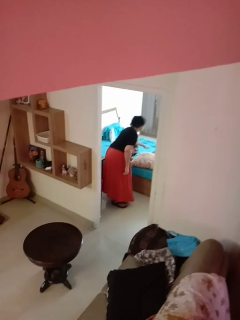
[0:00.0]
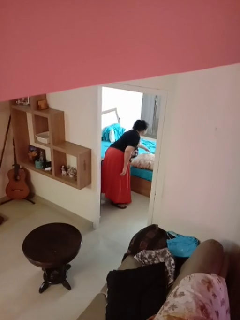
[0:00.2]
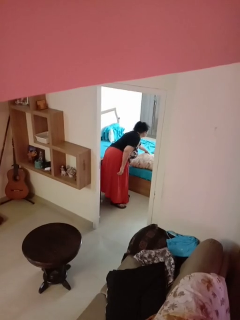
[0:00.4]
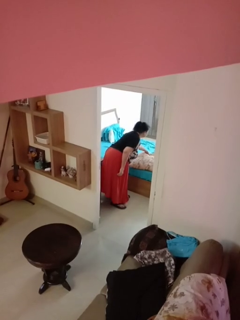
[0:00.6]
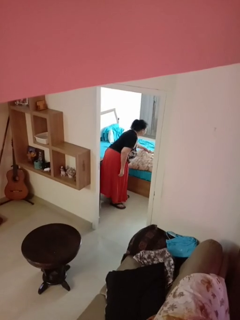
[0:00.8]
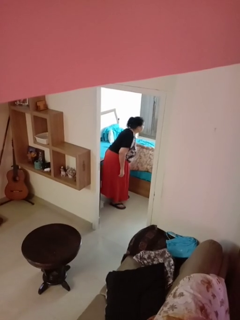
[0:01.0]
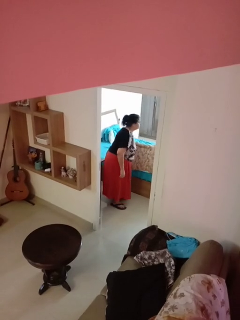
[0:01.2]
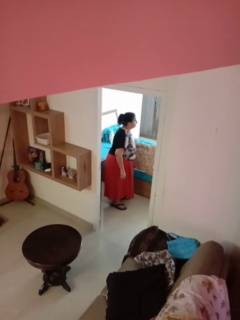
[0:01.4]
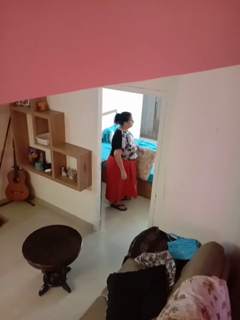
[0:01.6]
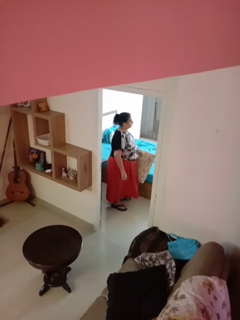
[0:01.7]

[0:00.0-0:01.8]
person picks up object from bed

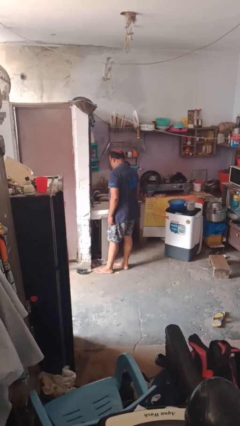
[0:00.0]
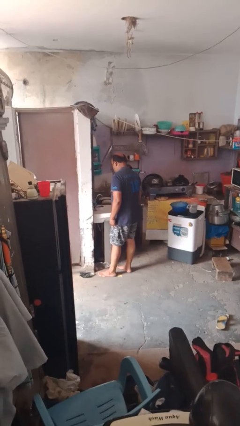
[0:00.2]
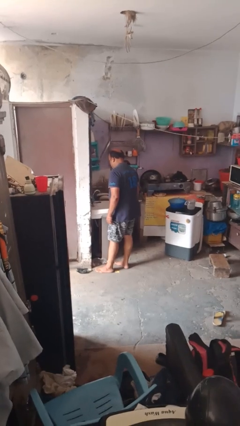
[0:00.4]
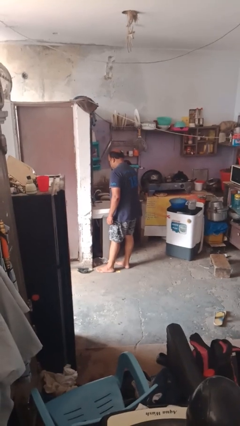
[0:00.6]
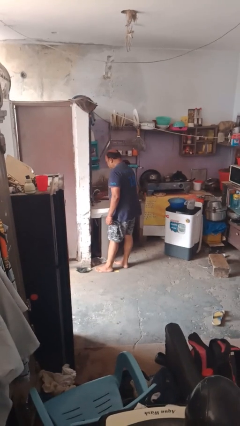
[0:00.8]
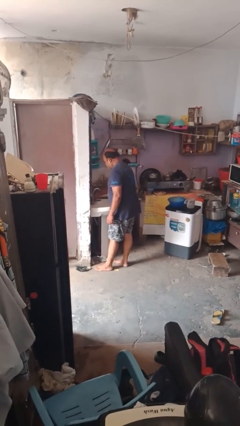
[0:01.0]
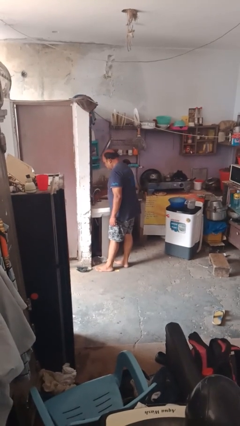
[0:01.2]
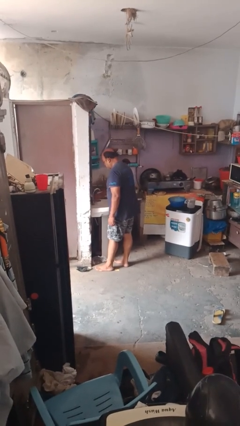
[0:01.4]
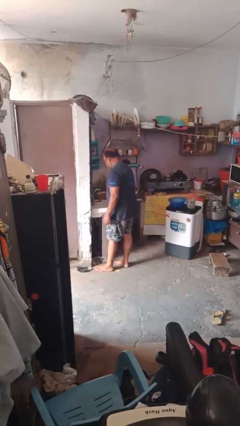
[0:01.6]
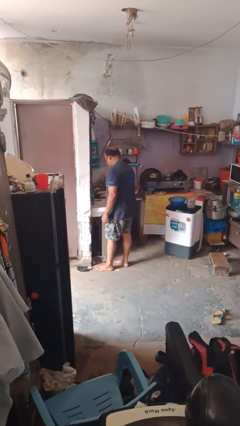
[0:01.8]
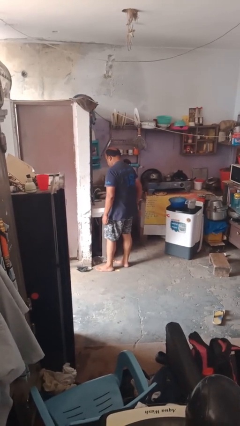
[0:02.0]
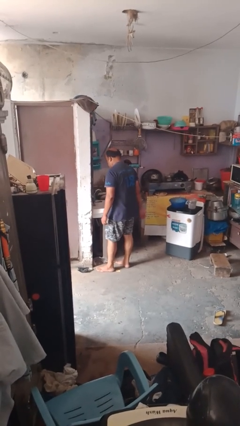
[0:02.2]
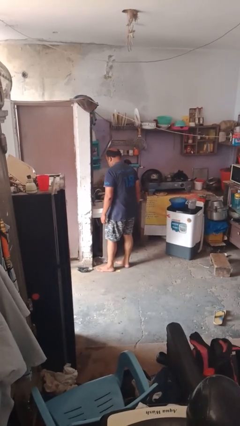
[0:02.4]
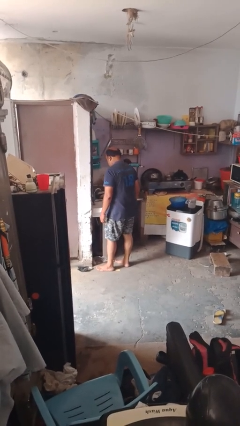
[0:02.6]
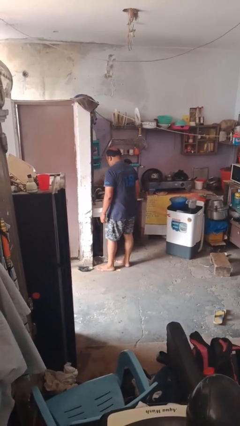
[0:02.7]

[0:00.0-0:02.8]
person turns on faucet

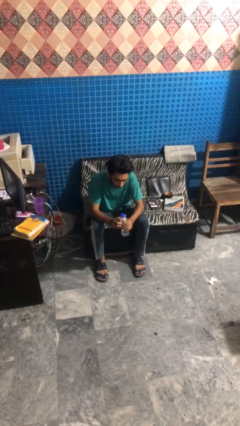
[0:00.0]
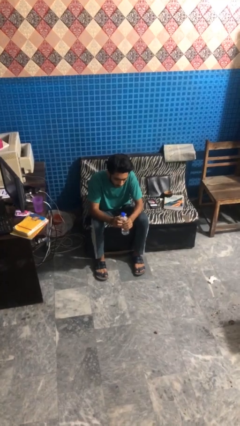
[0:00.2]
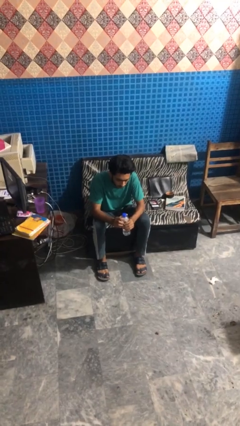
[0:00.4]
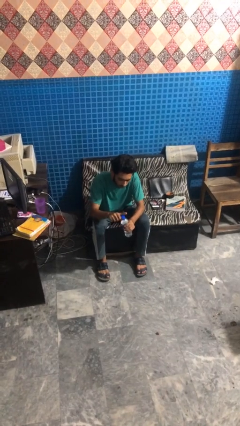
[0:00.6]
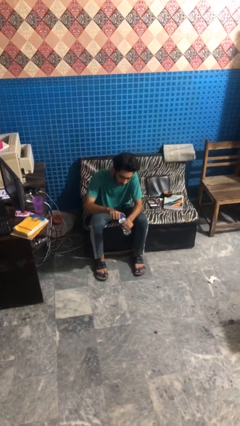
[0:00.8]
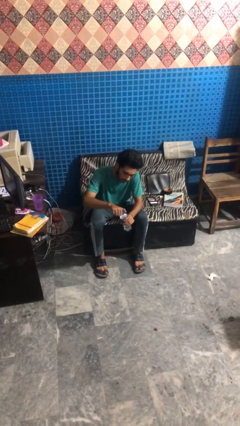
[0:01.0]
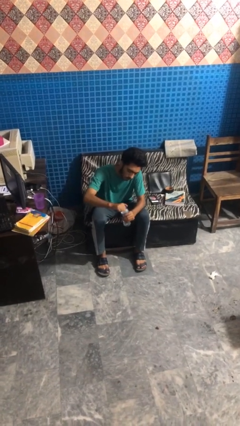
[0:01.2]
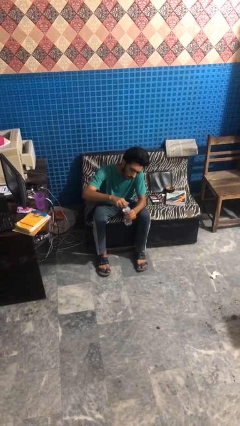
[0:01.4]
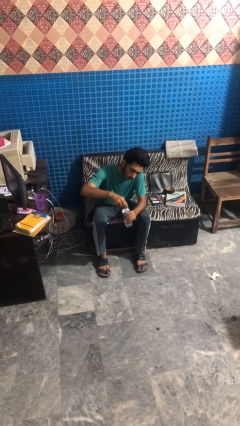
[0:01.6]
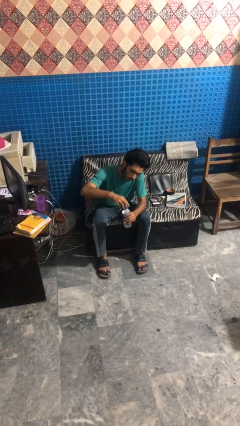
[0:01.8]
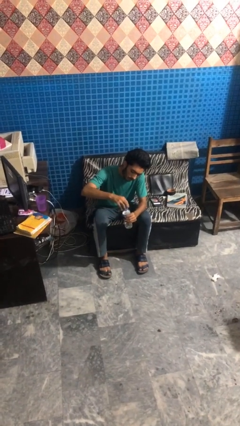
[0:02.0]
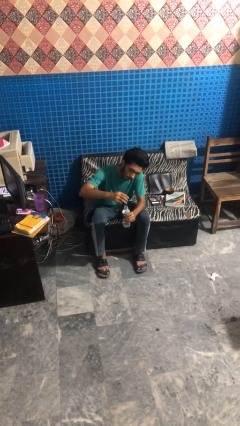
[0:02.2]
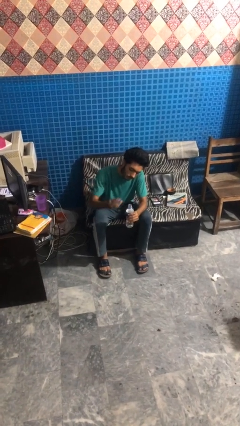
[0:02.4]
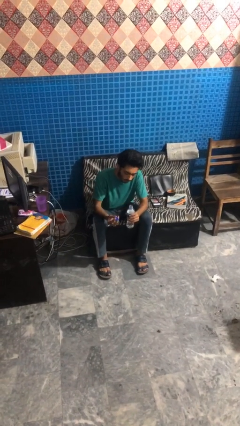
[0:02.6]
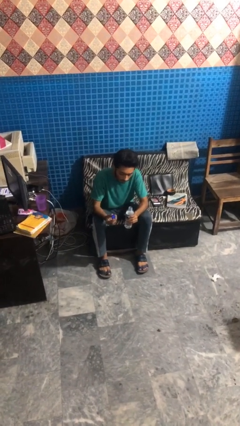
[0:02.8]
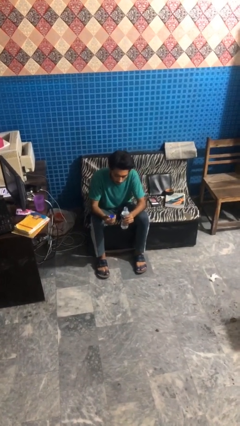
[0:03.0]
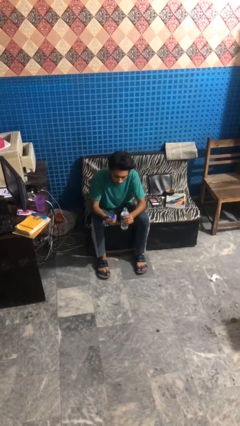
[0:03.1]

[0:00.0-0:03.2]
person unscrews lid from bottle

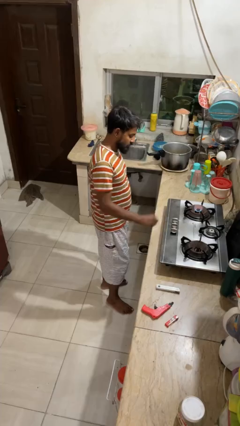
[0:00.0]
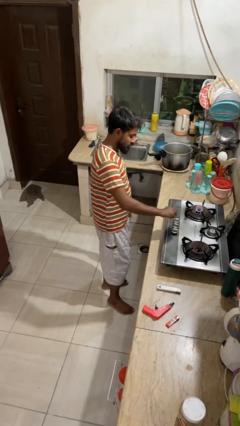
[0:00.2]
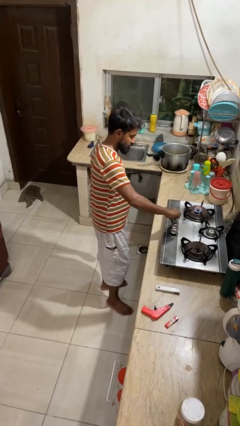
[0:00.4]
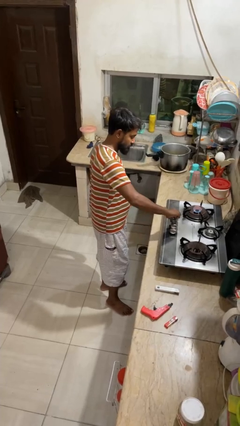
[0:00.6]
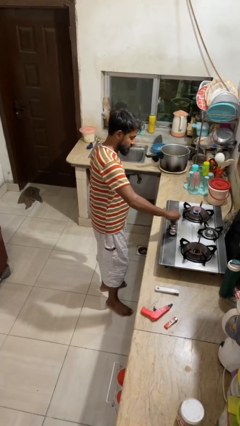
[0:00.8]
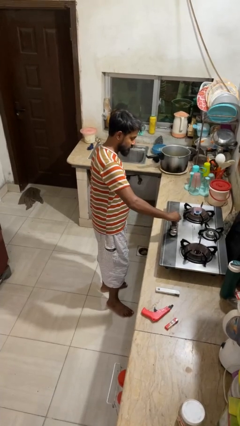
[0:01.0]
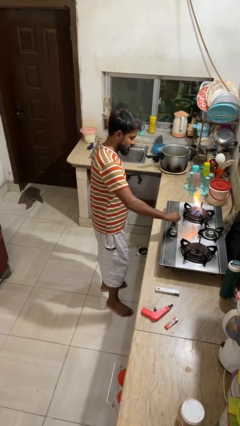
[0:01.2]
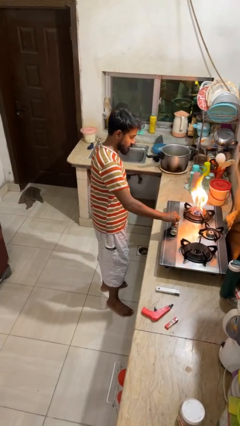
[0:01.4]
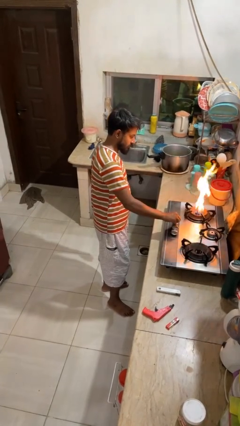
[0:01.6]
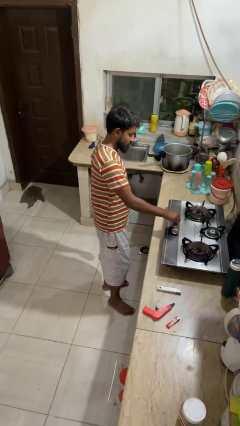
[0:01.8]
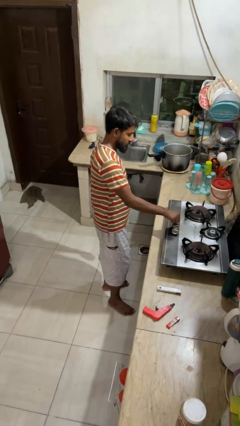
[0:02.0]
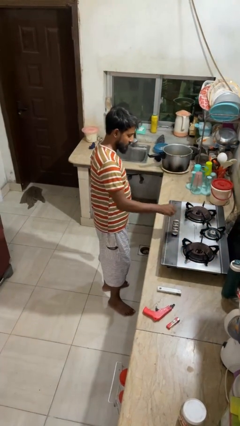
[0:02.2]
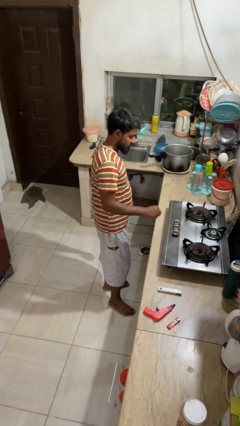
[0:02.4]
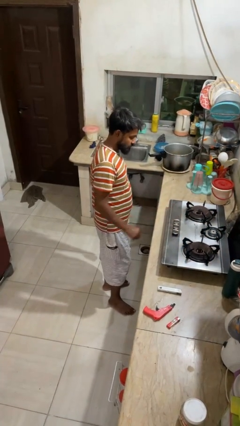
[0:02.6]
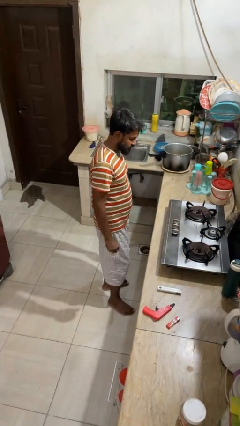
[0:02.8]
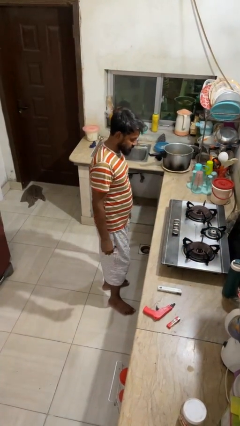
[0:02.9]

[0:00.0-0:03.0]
person turns off stovetop

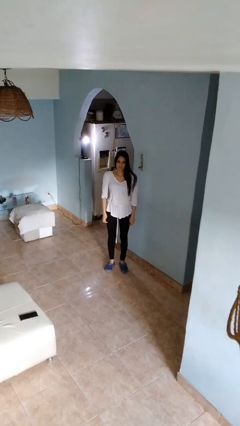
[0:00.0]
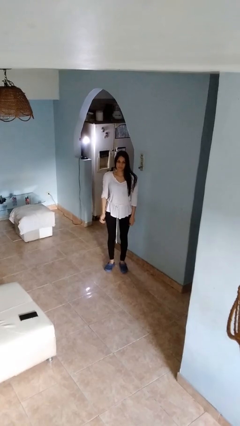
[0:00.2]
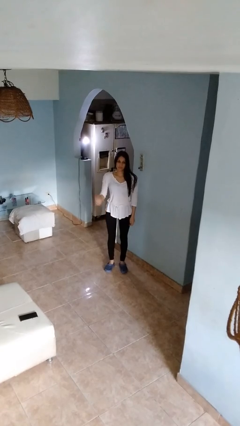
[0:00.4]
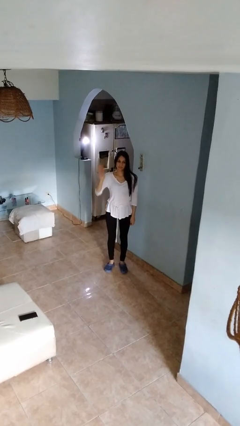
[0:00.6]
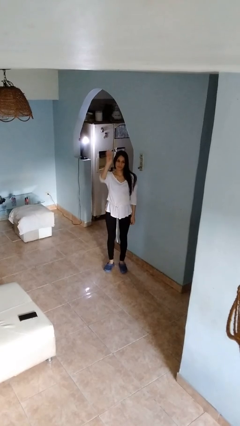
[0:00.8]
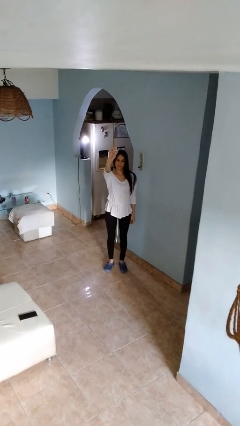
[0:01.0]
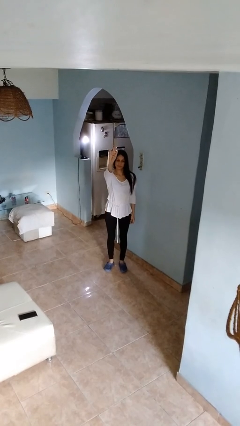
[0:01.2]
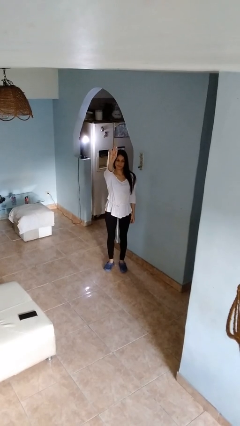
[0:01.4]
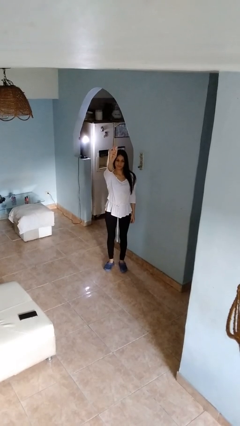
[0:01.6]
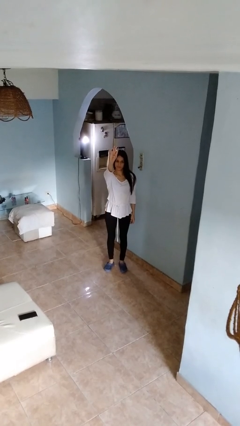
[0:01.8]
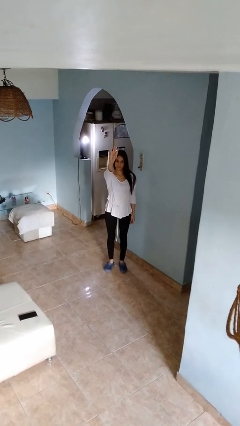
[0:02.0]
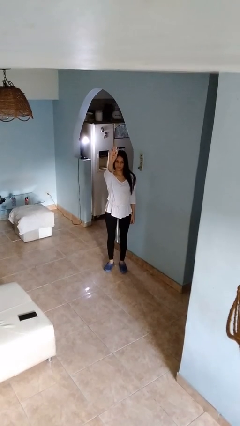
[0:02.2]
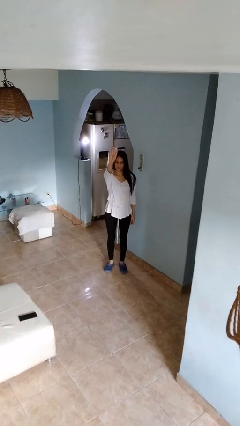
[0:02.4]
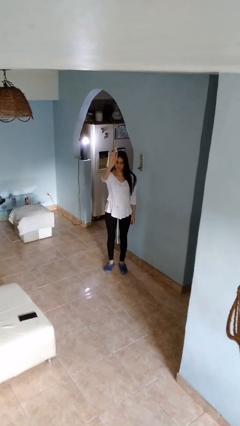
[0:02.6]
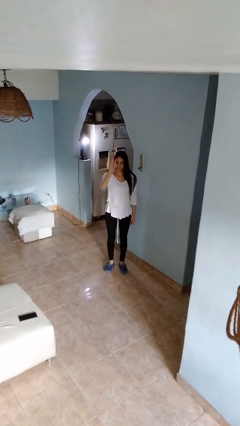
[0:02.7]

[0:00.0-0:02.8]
person gestures number four

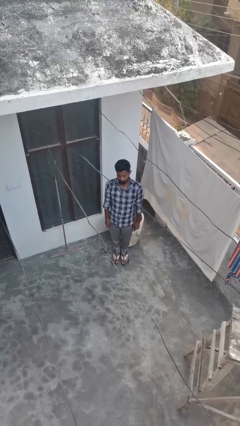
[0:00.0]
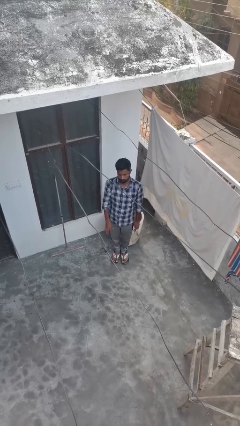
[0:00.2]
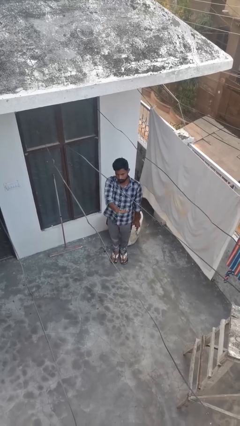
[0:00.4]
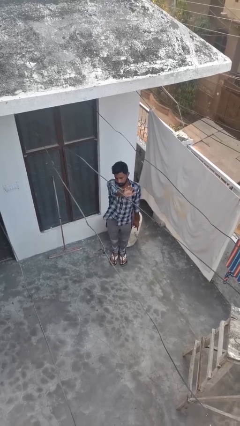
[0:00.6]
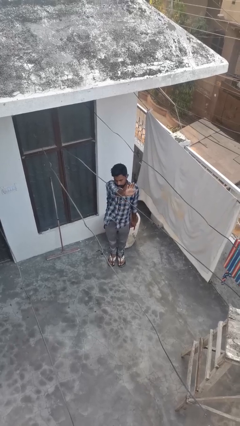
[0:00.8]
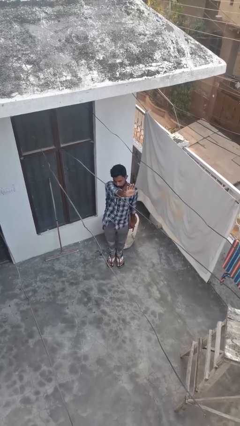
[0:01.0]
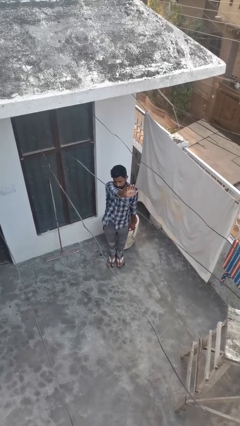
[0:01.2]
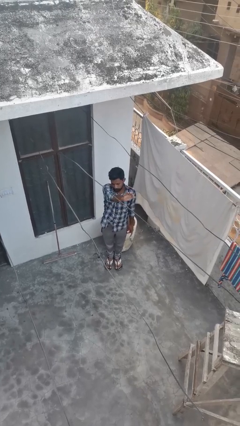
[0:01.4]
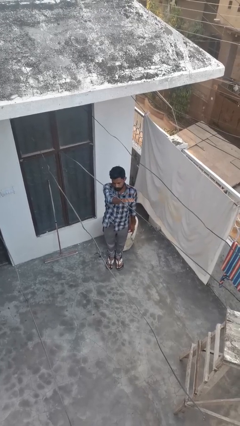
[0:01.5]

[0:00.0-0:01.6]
person gestures stop

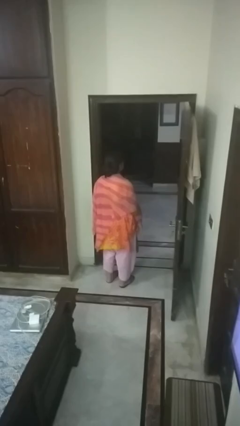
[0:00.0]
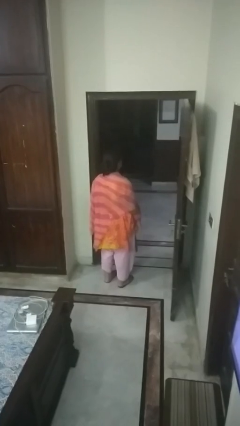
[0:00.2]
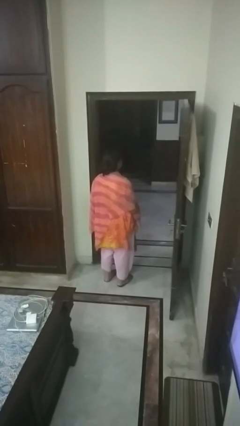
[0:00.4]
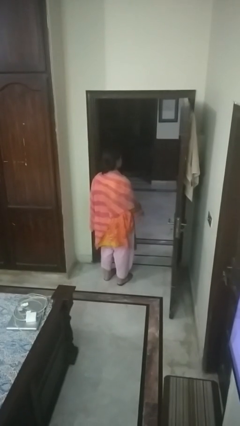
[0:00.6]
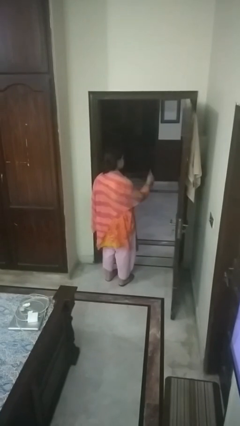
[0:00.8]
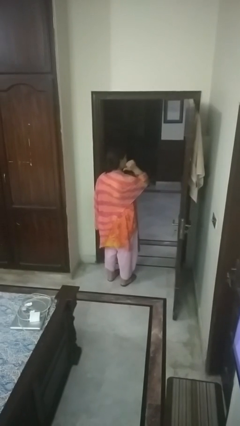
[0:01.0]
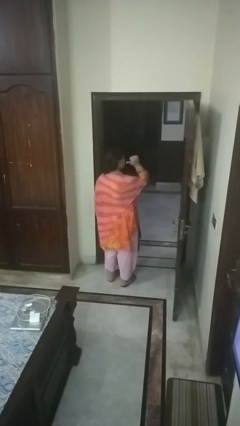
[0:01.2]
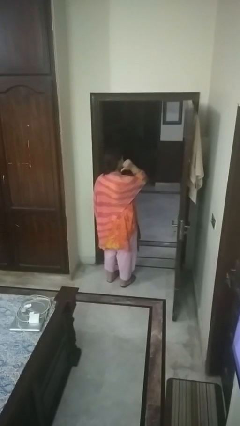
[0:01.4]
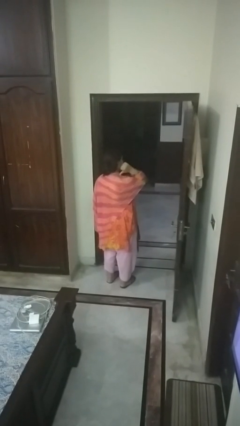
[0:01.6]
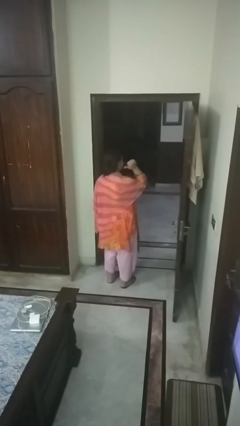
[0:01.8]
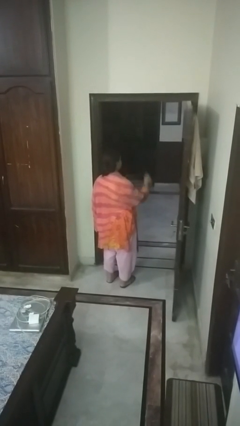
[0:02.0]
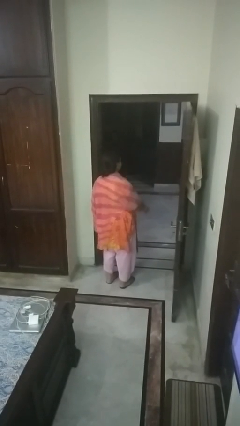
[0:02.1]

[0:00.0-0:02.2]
person gestures behind me

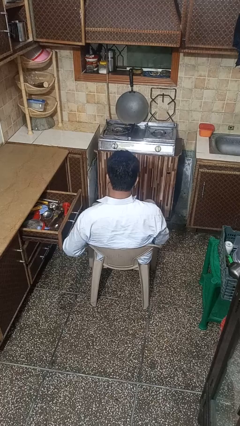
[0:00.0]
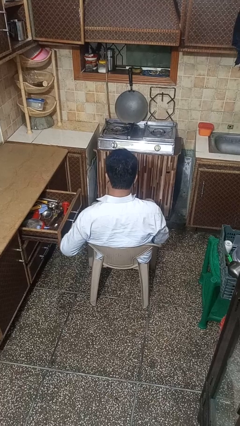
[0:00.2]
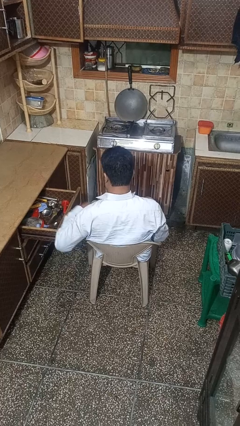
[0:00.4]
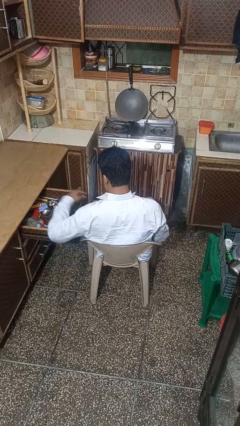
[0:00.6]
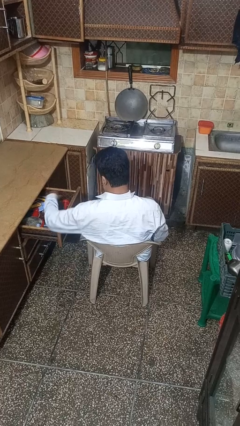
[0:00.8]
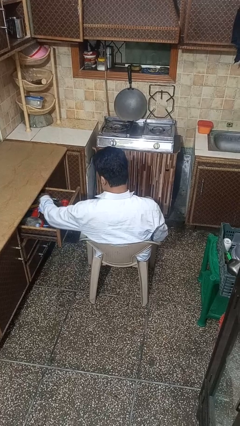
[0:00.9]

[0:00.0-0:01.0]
person searches in kitchen drawer
